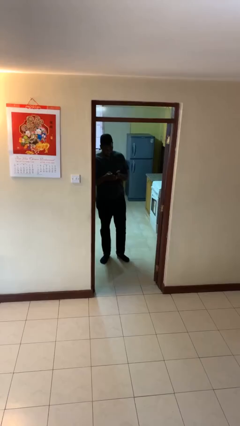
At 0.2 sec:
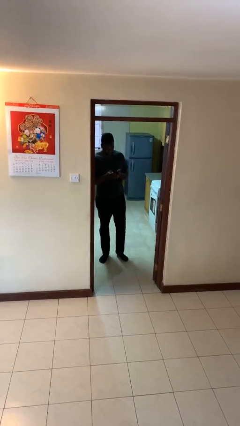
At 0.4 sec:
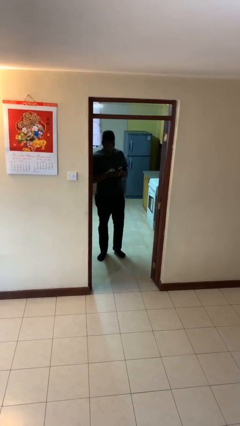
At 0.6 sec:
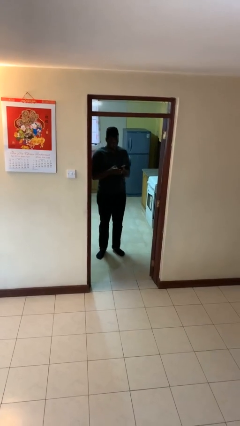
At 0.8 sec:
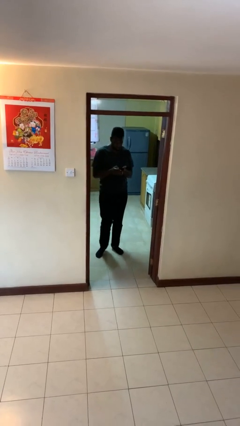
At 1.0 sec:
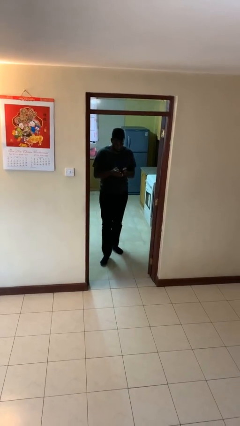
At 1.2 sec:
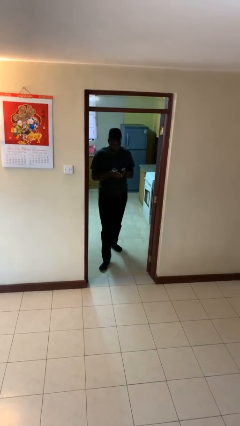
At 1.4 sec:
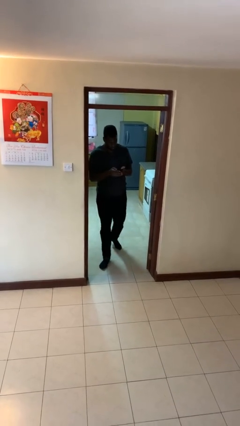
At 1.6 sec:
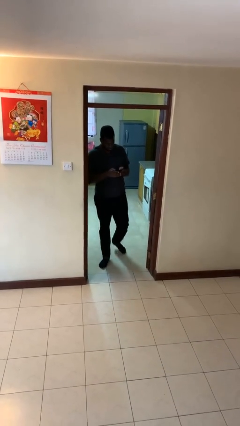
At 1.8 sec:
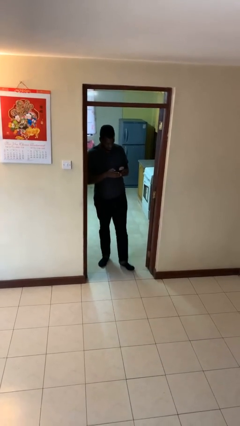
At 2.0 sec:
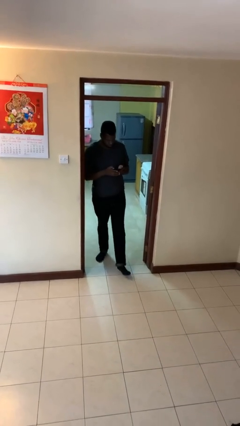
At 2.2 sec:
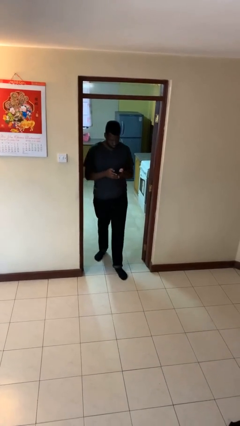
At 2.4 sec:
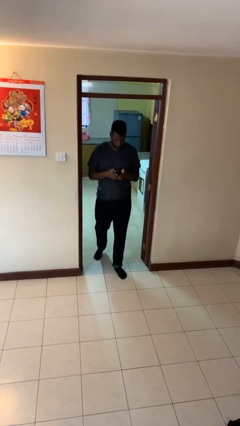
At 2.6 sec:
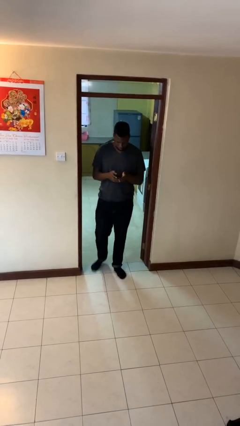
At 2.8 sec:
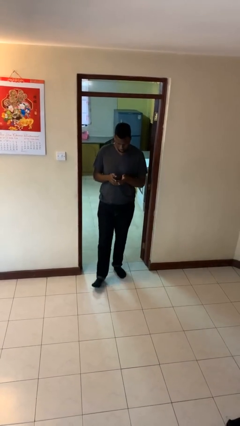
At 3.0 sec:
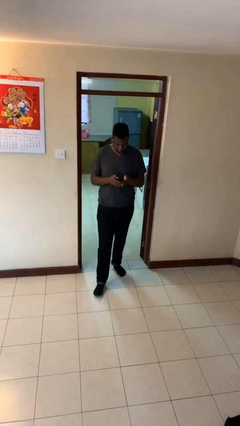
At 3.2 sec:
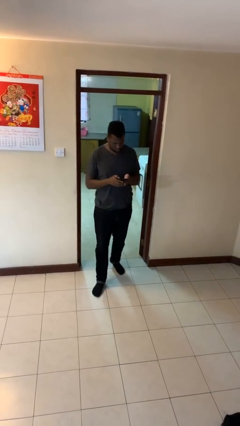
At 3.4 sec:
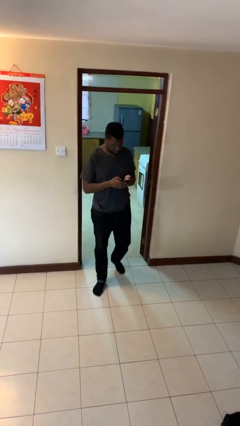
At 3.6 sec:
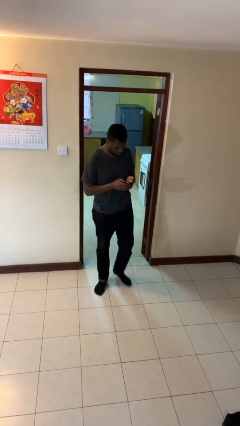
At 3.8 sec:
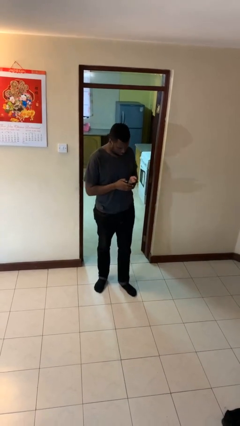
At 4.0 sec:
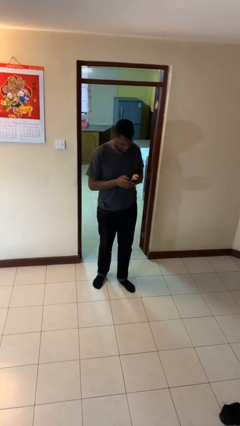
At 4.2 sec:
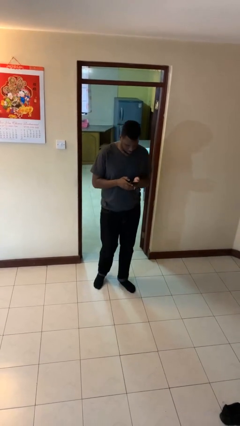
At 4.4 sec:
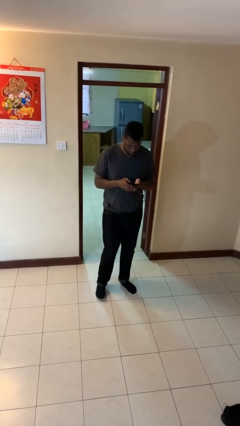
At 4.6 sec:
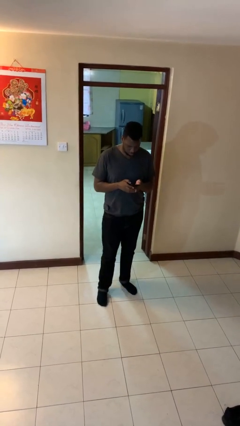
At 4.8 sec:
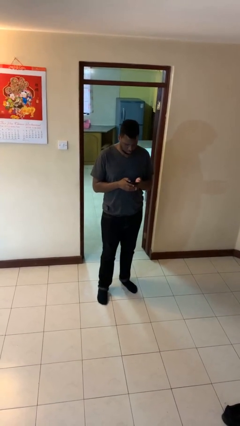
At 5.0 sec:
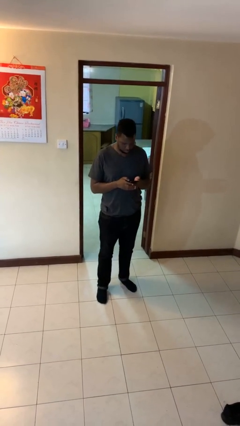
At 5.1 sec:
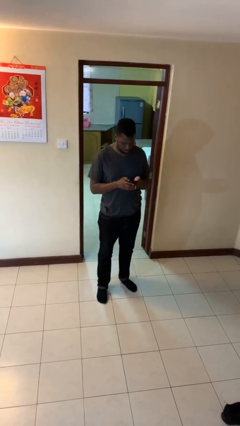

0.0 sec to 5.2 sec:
person enters scene through structure

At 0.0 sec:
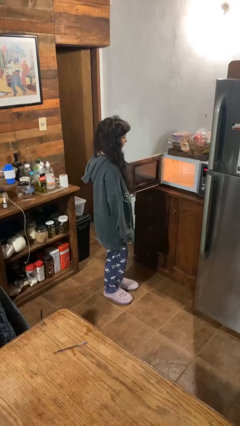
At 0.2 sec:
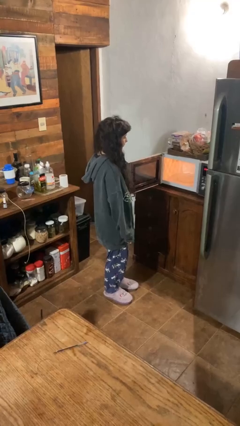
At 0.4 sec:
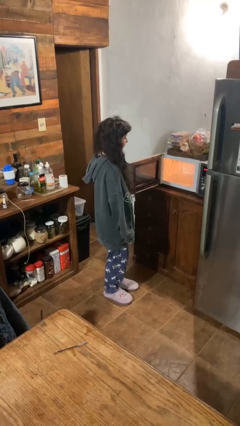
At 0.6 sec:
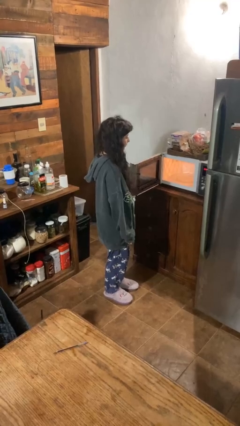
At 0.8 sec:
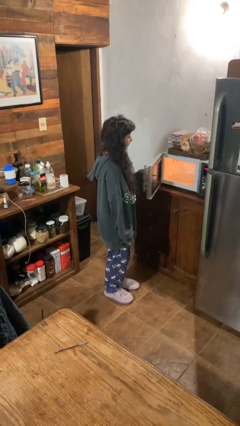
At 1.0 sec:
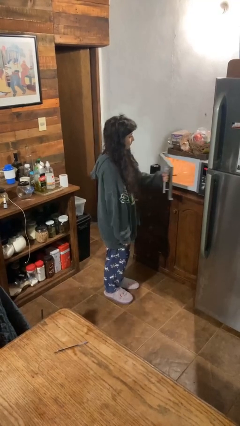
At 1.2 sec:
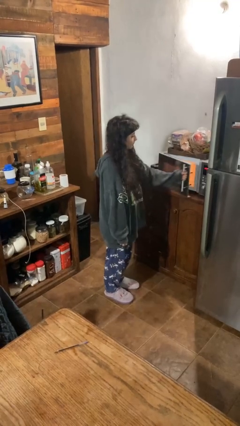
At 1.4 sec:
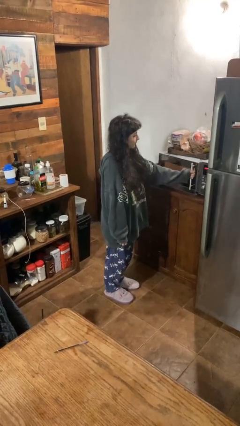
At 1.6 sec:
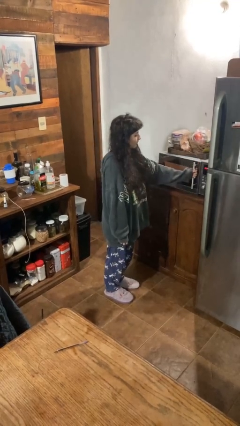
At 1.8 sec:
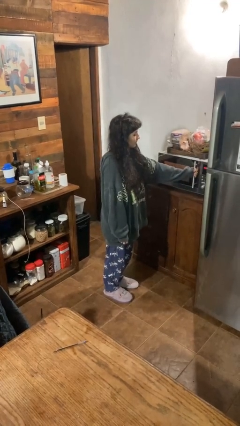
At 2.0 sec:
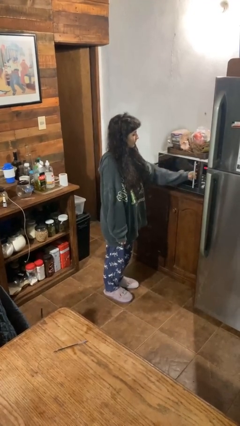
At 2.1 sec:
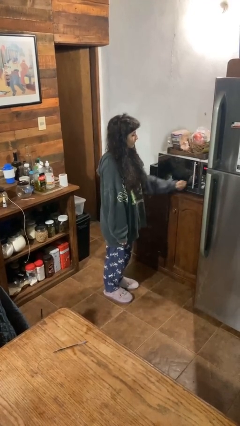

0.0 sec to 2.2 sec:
person closes microwave

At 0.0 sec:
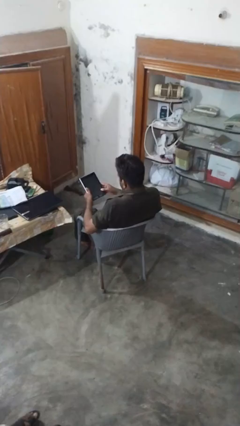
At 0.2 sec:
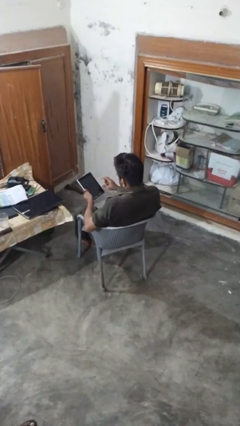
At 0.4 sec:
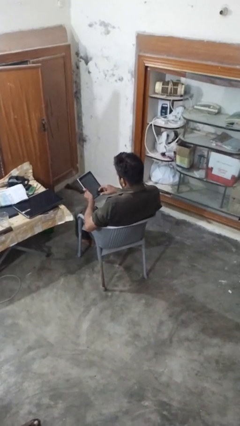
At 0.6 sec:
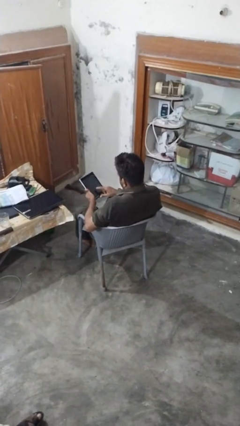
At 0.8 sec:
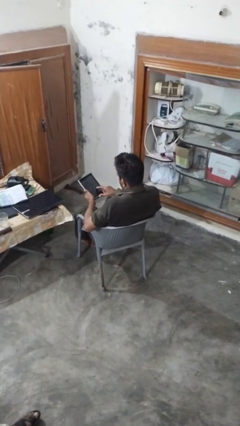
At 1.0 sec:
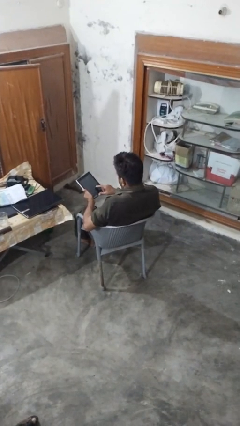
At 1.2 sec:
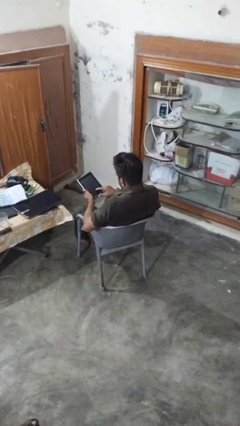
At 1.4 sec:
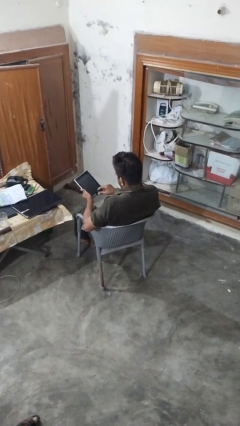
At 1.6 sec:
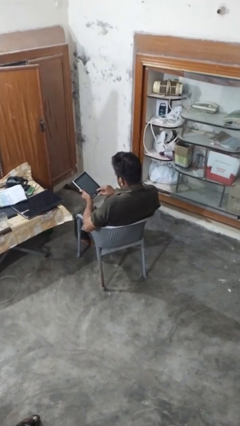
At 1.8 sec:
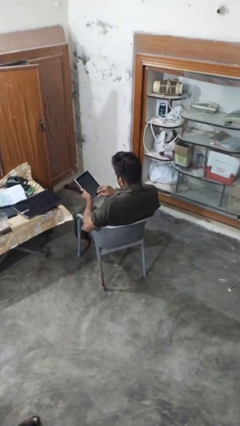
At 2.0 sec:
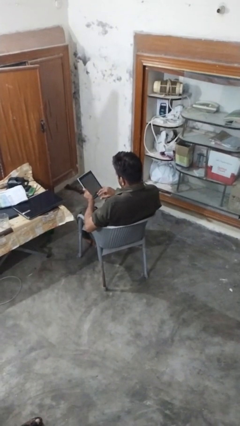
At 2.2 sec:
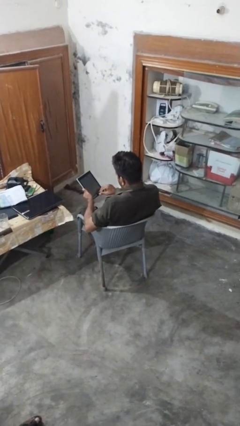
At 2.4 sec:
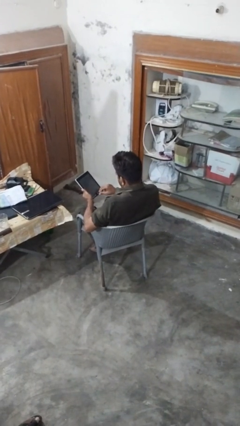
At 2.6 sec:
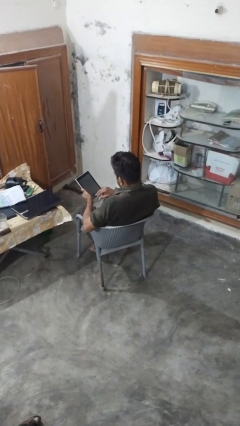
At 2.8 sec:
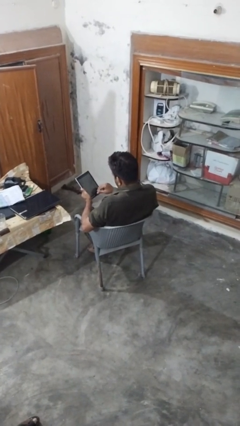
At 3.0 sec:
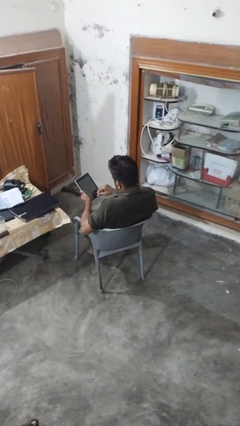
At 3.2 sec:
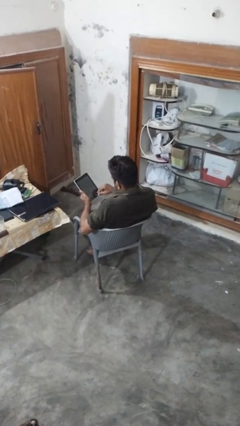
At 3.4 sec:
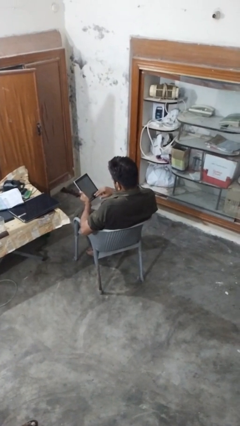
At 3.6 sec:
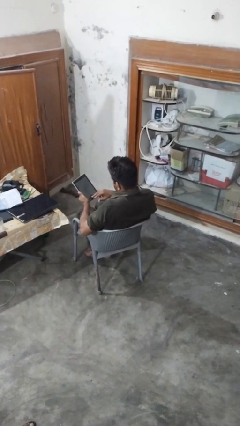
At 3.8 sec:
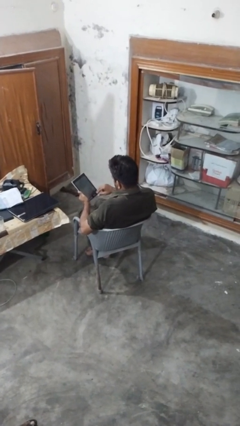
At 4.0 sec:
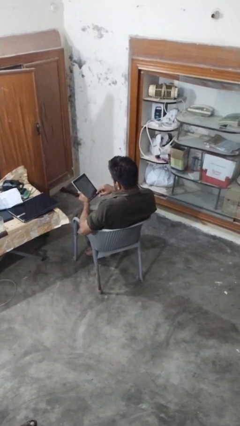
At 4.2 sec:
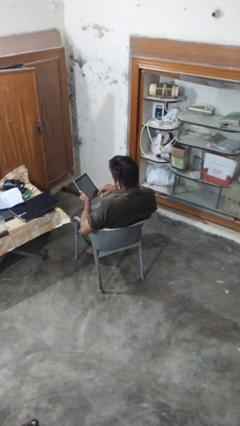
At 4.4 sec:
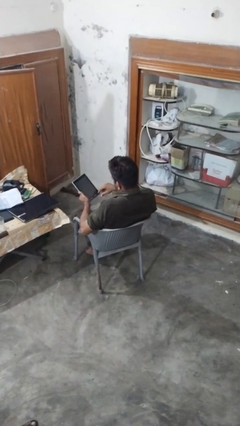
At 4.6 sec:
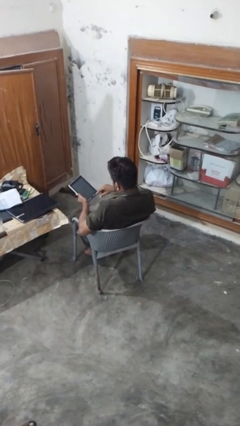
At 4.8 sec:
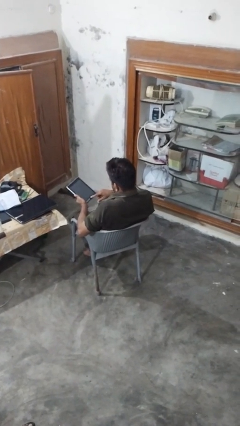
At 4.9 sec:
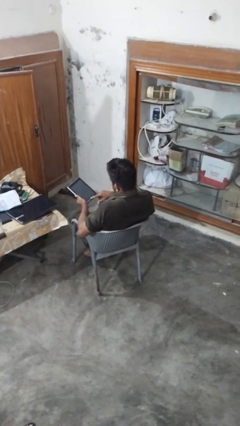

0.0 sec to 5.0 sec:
person interacts with tablet

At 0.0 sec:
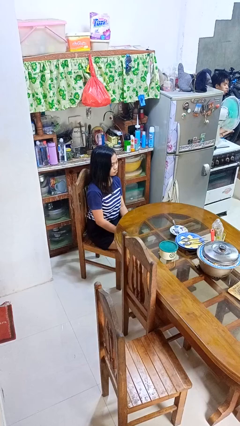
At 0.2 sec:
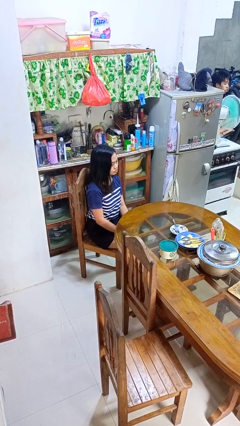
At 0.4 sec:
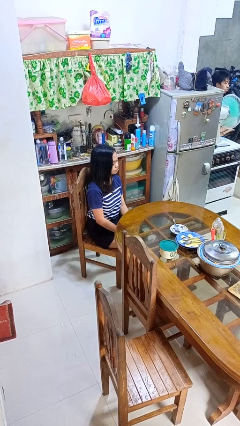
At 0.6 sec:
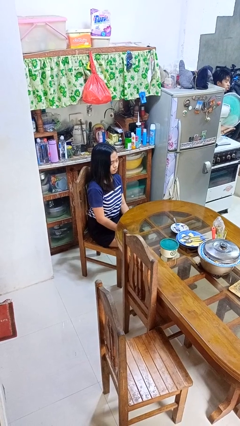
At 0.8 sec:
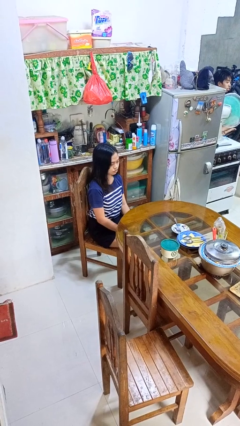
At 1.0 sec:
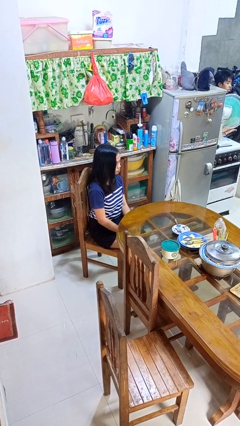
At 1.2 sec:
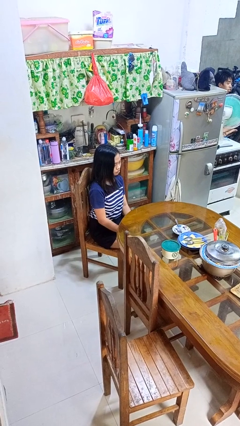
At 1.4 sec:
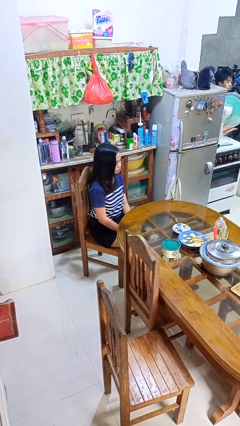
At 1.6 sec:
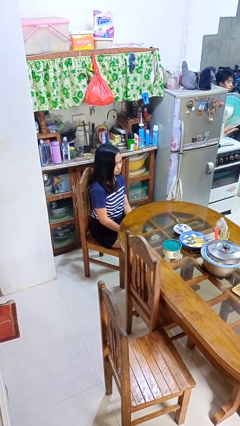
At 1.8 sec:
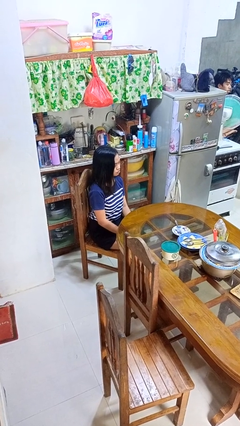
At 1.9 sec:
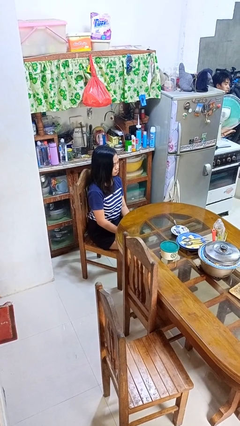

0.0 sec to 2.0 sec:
person shakes head

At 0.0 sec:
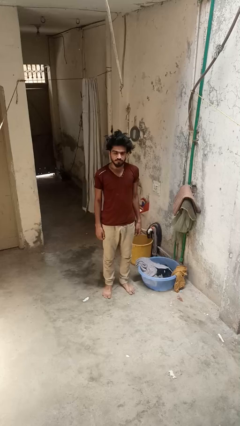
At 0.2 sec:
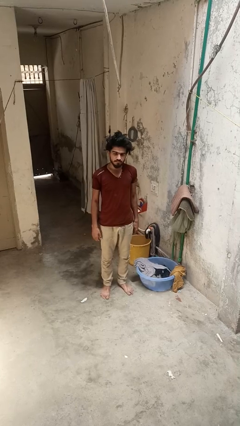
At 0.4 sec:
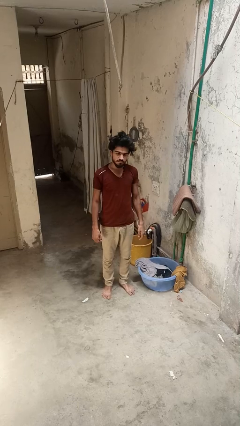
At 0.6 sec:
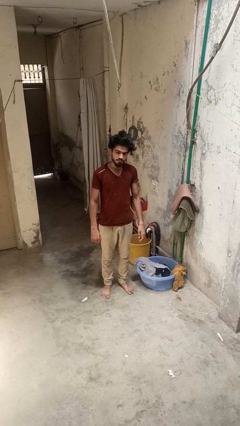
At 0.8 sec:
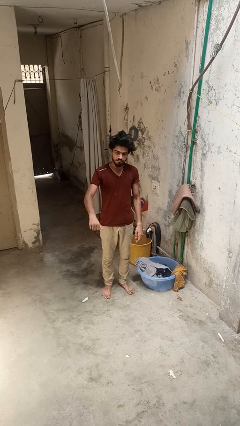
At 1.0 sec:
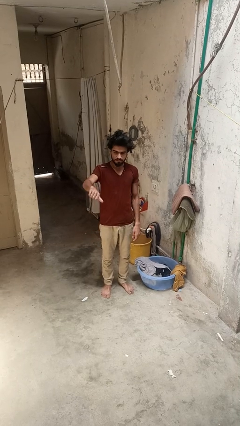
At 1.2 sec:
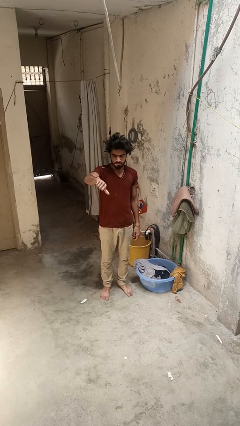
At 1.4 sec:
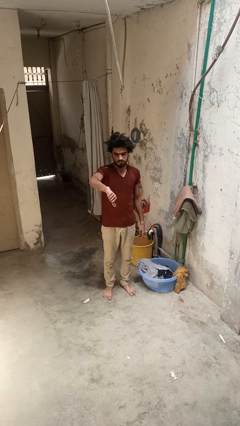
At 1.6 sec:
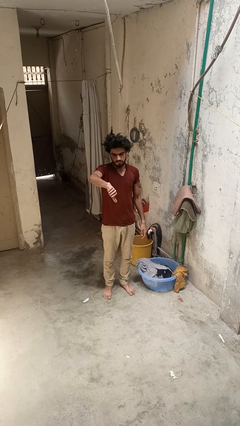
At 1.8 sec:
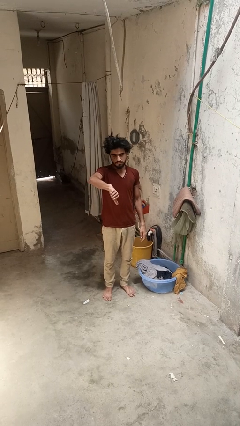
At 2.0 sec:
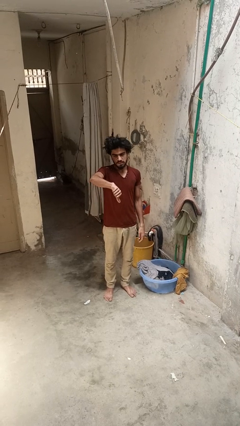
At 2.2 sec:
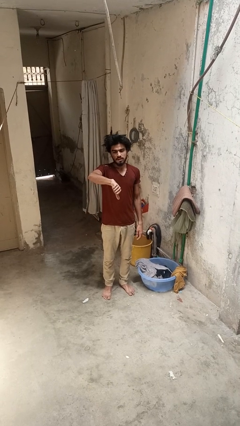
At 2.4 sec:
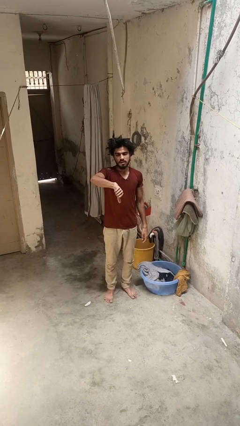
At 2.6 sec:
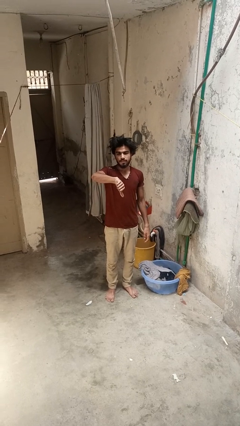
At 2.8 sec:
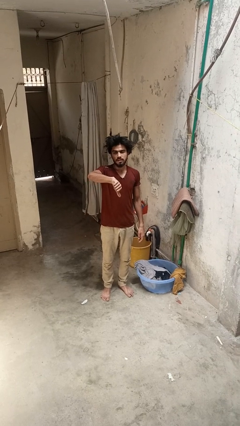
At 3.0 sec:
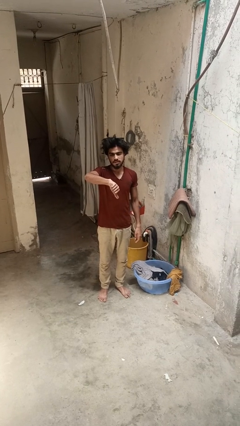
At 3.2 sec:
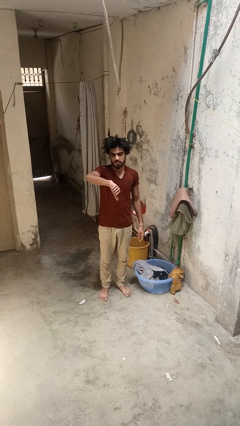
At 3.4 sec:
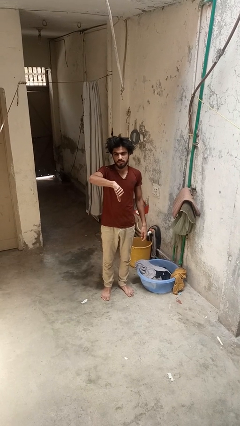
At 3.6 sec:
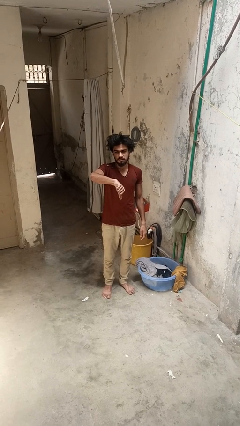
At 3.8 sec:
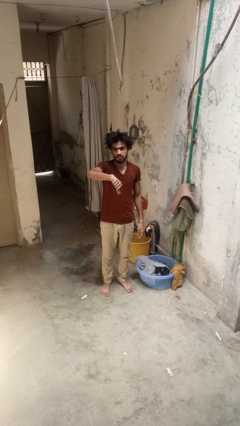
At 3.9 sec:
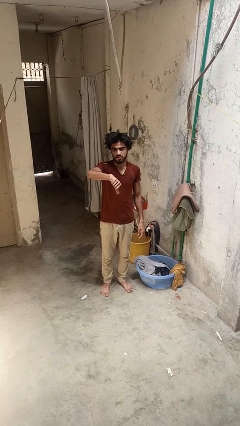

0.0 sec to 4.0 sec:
person gestures thumbs down
